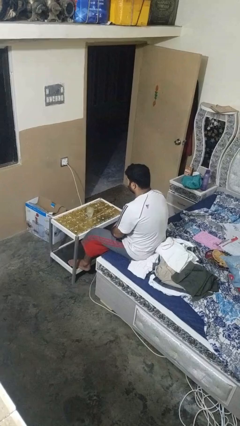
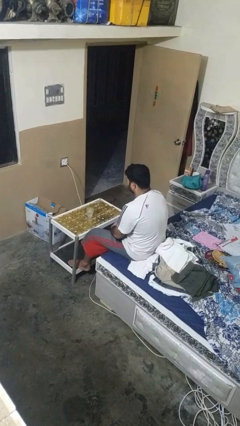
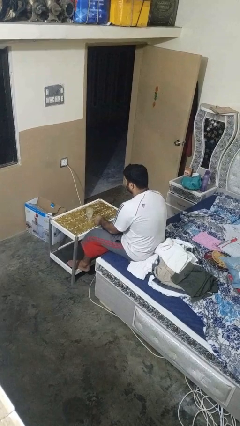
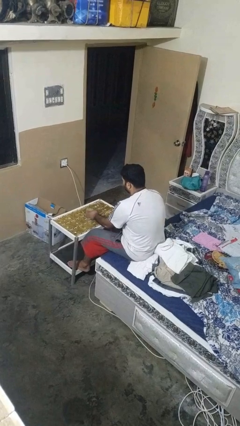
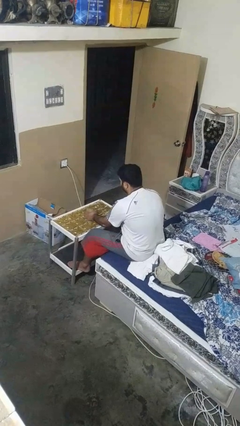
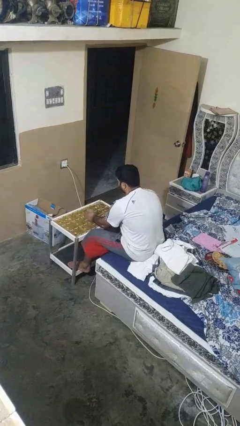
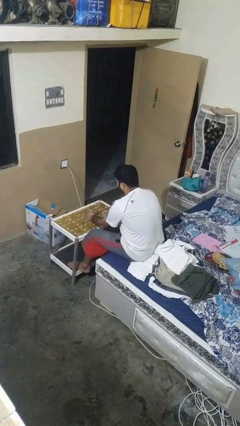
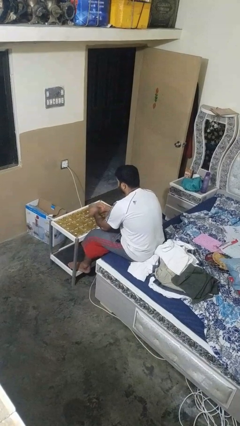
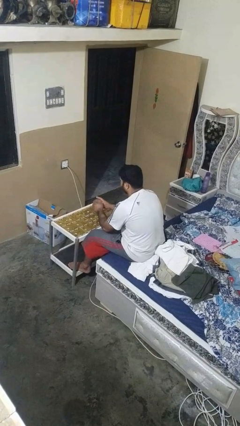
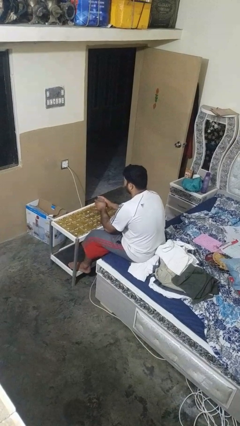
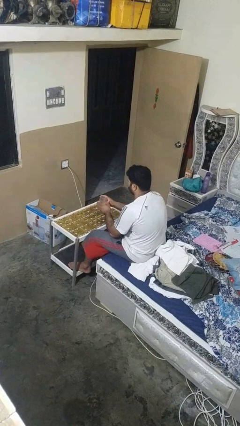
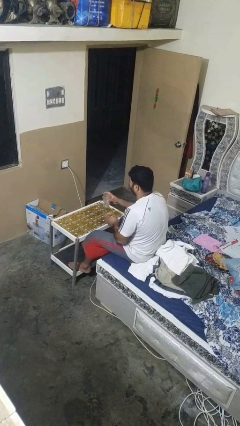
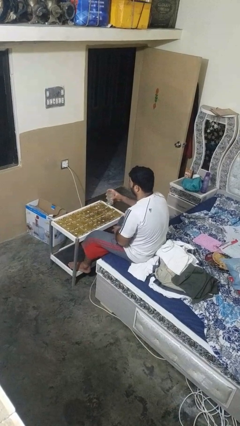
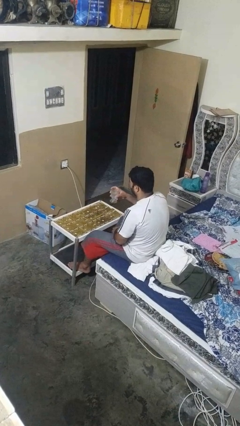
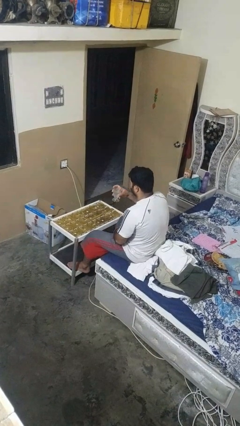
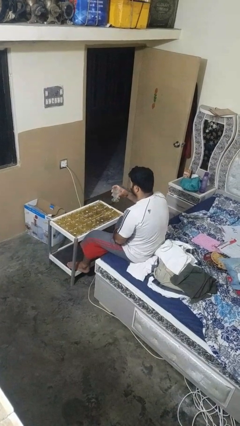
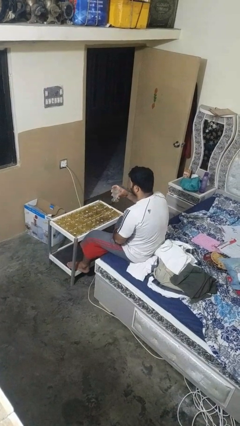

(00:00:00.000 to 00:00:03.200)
person picks up object from table

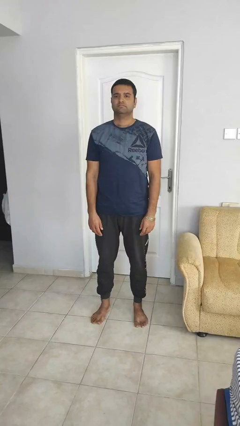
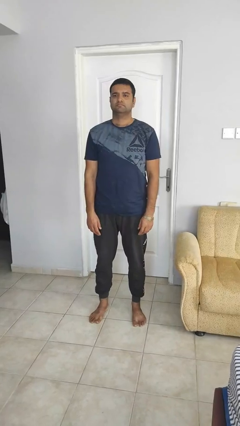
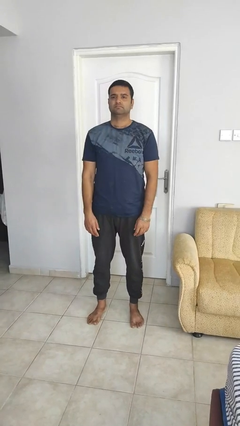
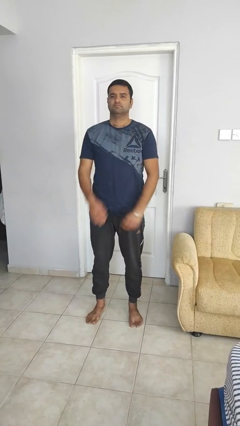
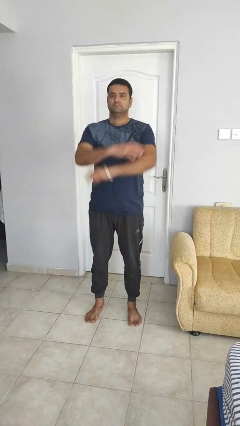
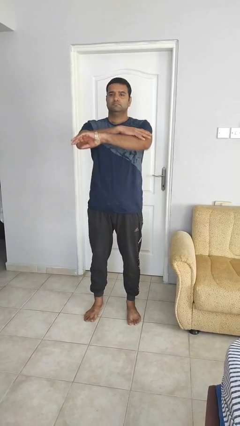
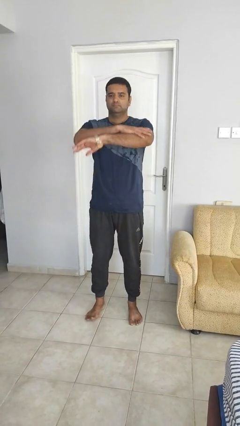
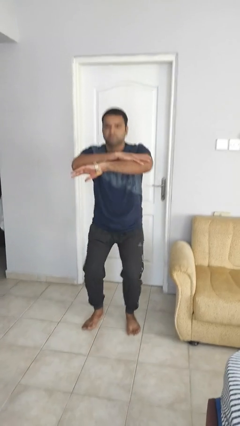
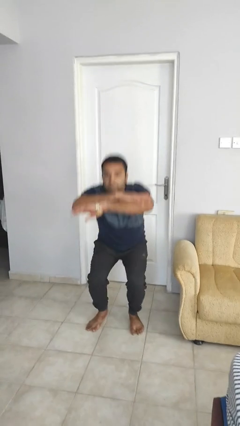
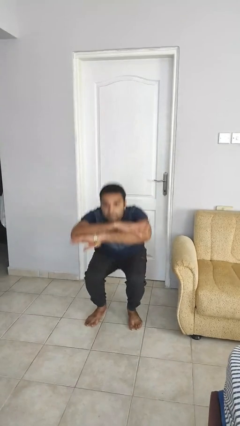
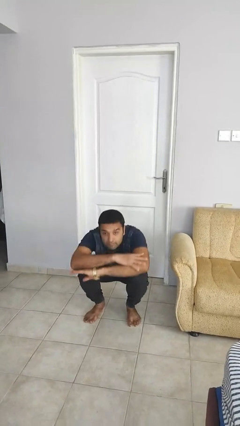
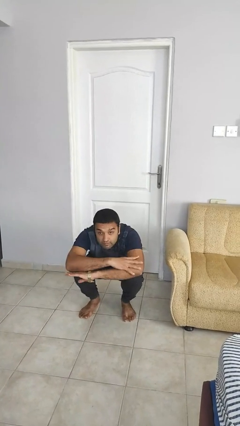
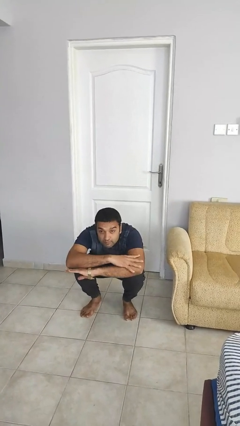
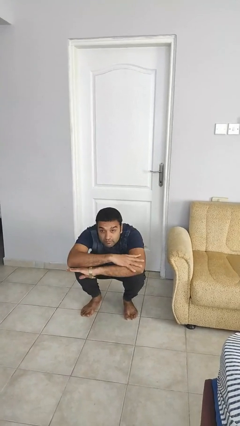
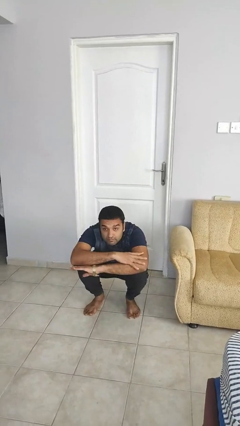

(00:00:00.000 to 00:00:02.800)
person squats

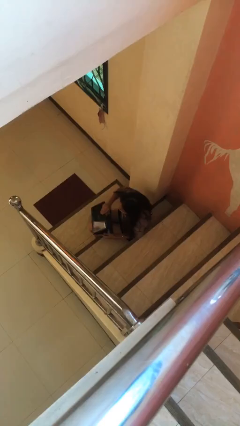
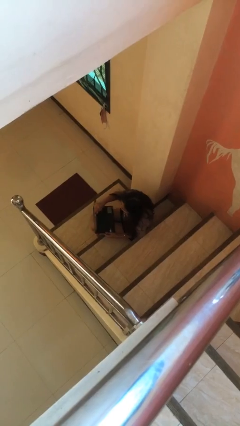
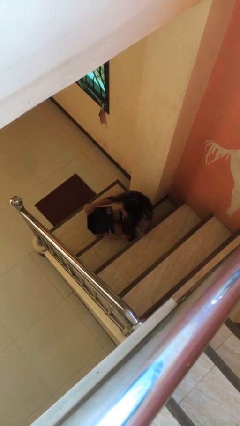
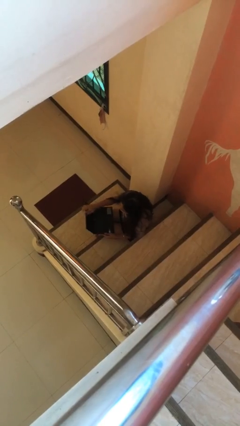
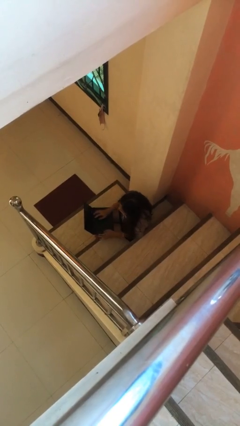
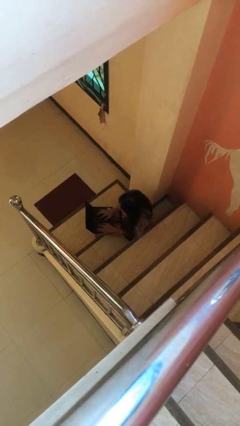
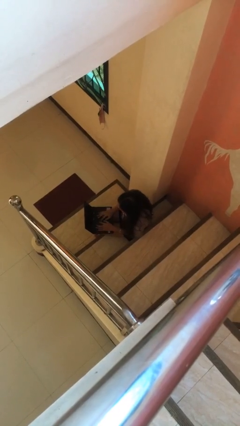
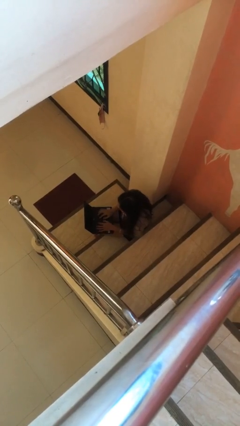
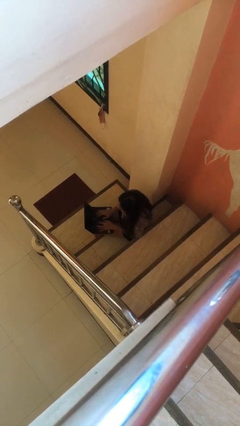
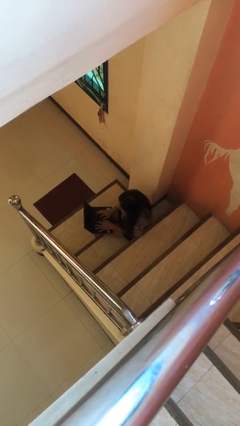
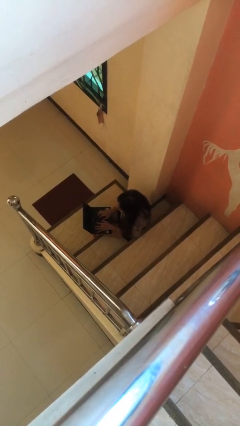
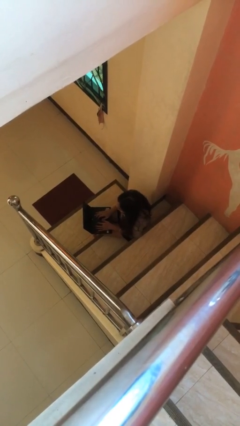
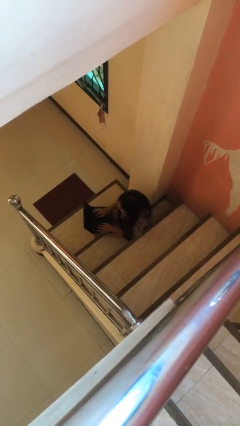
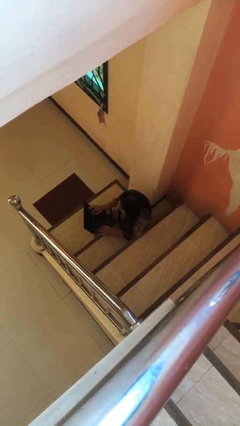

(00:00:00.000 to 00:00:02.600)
person interacts with laptop

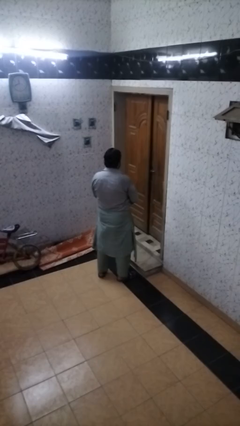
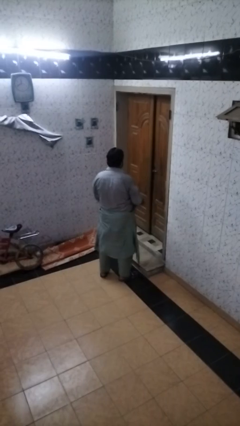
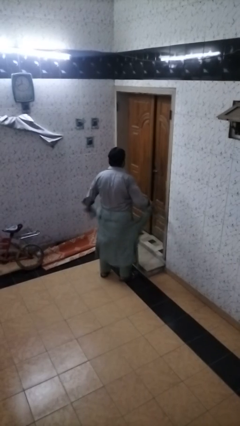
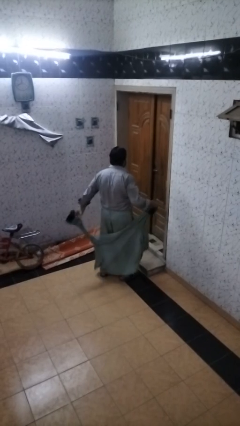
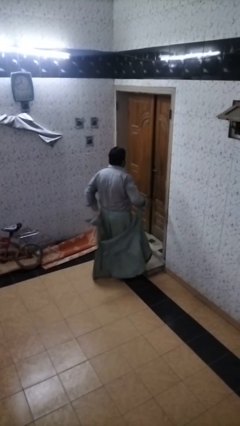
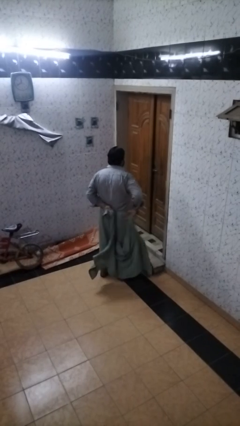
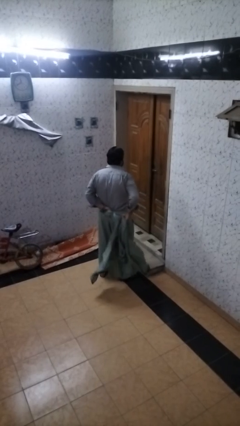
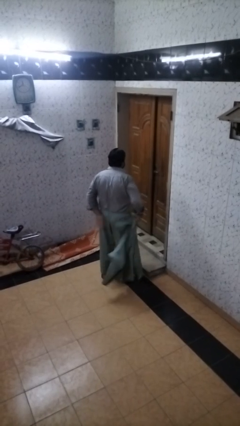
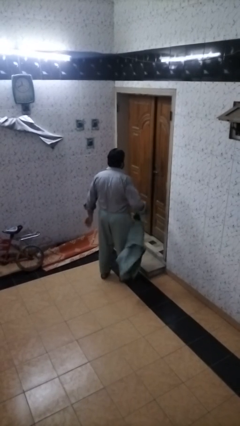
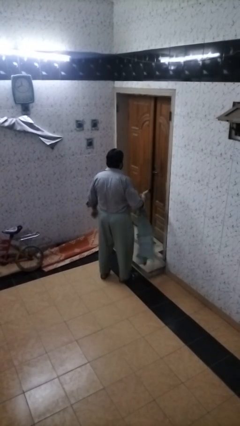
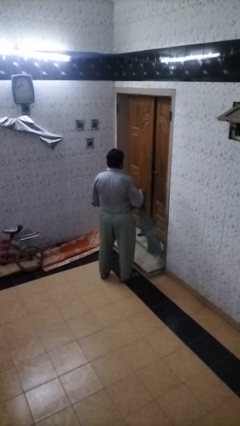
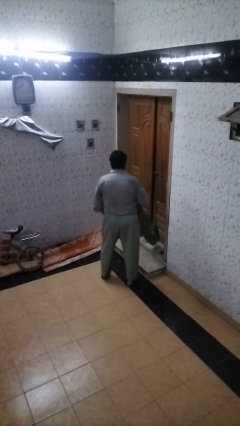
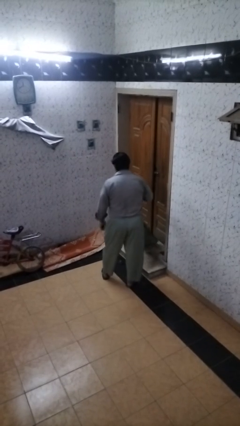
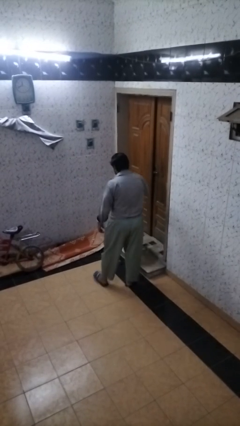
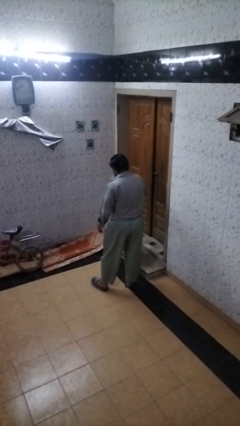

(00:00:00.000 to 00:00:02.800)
person unties jacket around waist

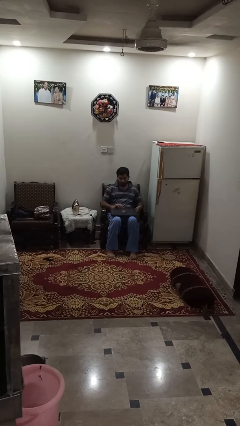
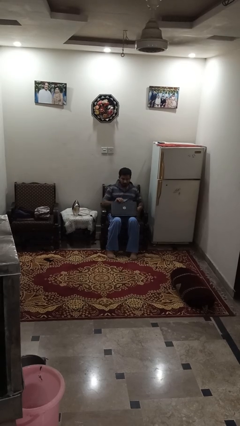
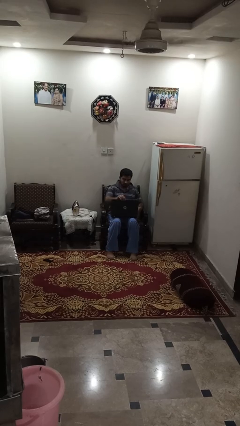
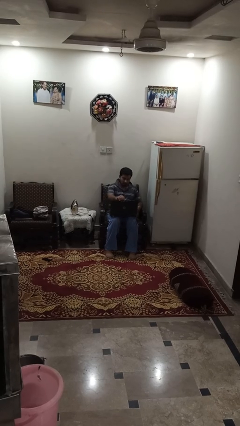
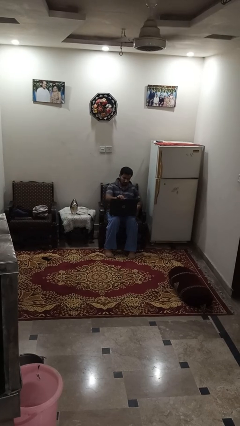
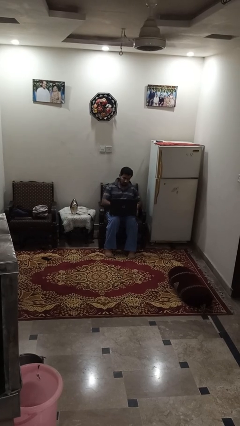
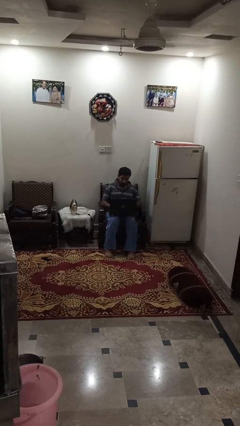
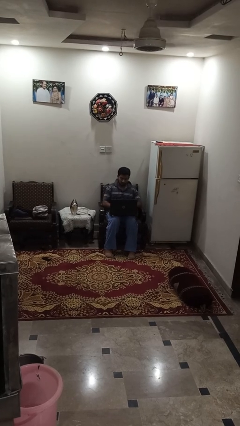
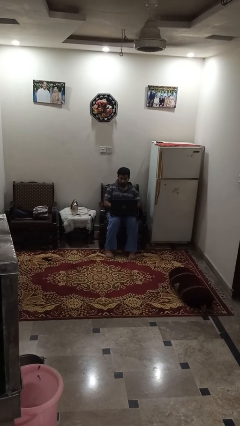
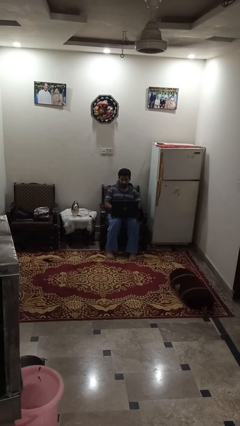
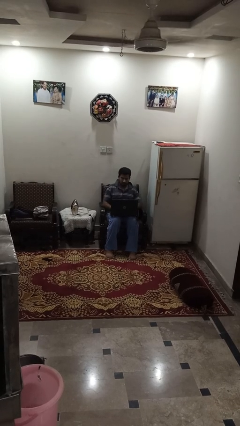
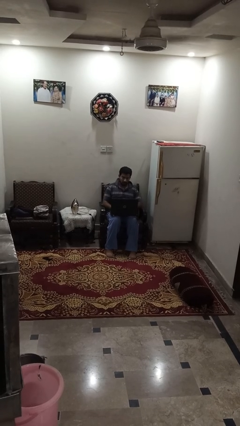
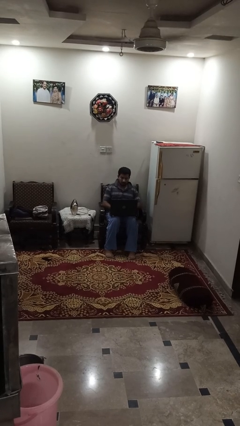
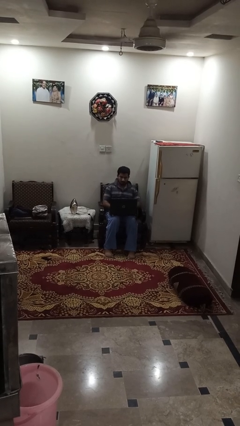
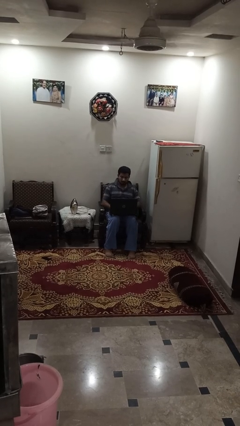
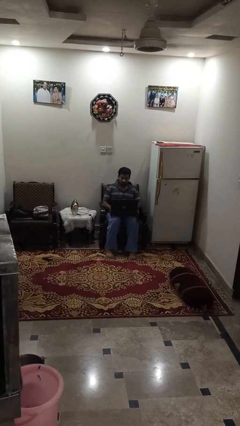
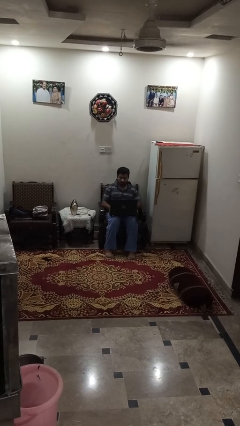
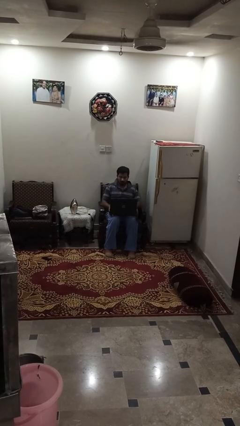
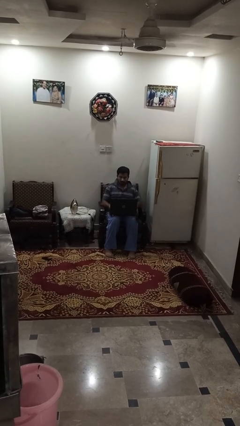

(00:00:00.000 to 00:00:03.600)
person opens laptop

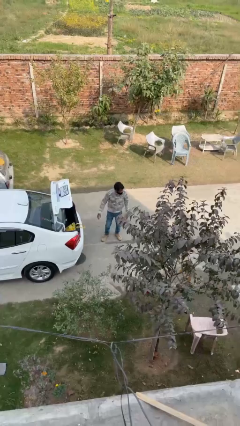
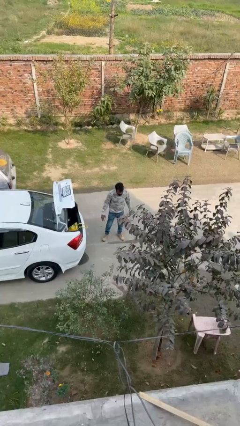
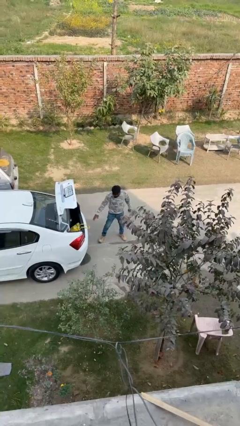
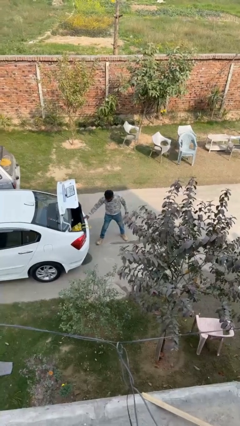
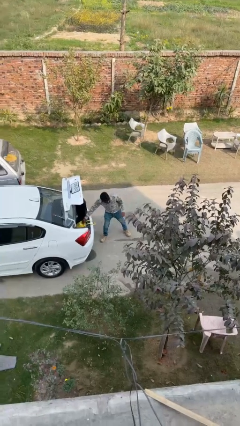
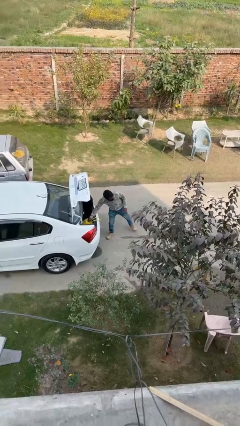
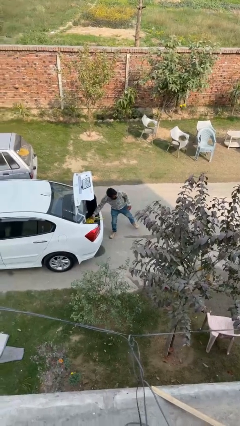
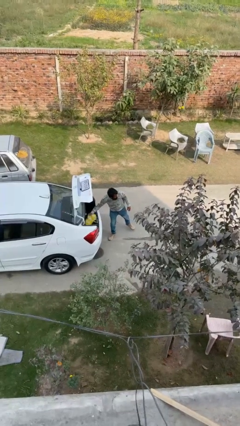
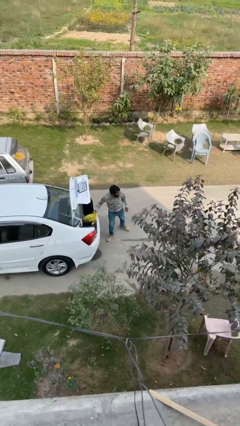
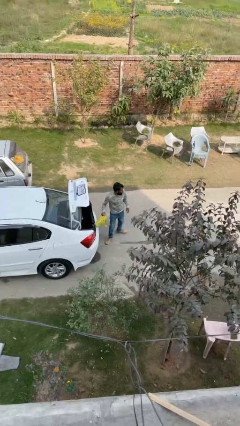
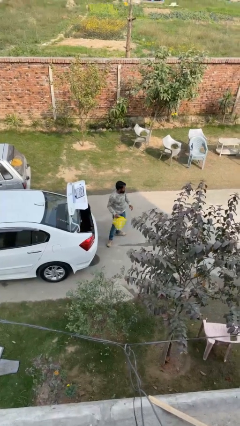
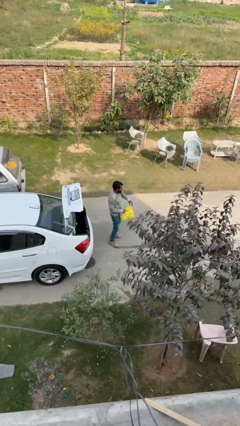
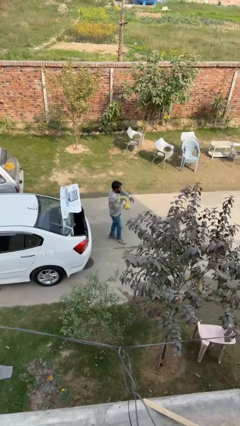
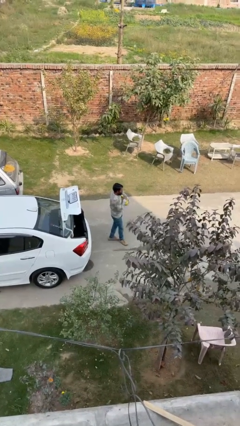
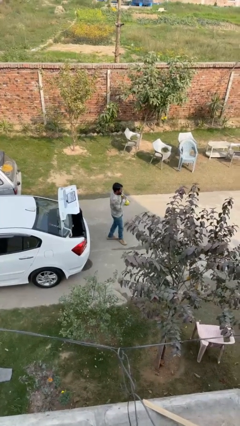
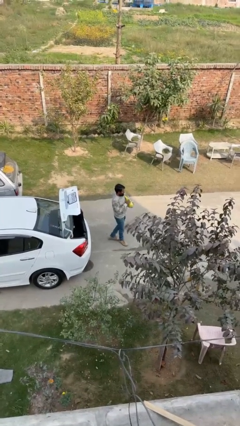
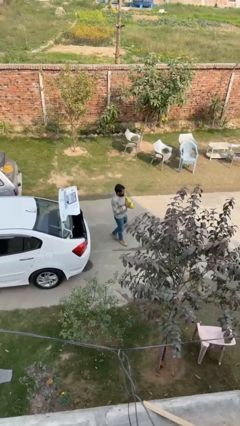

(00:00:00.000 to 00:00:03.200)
person unloads car
